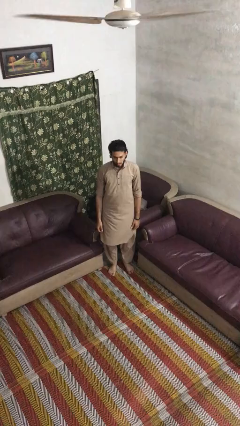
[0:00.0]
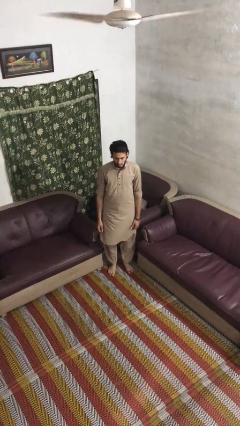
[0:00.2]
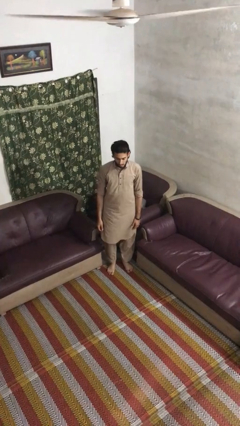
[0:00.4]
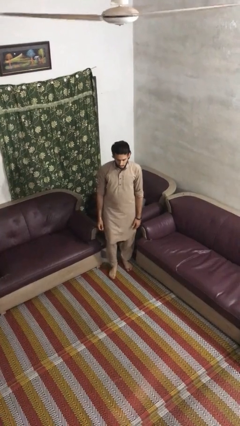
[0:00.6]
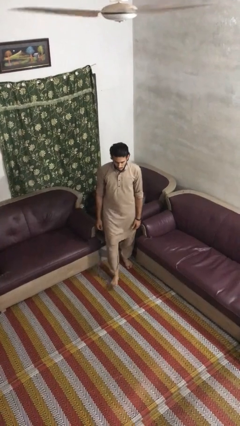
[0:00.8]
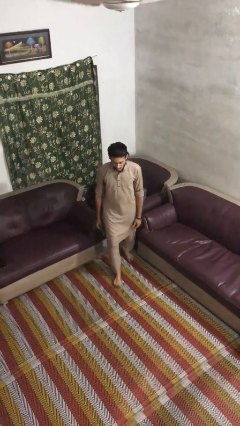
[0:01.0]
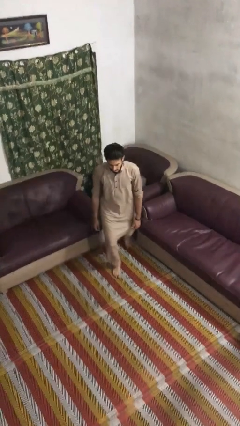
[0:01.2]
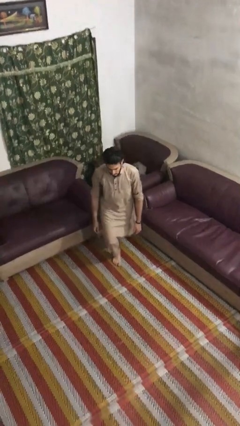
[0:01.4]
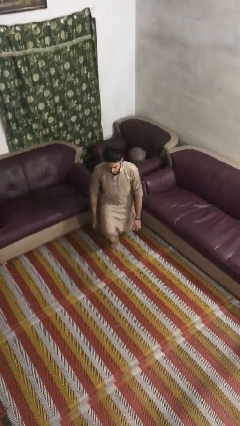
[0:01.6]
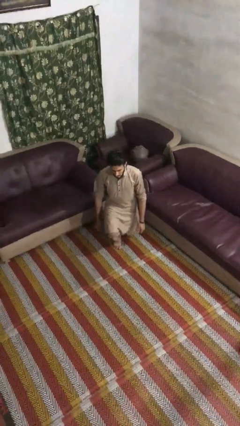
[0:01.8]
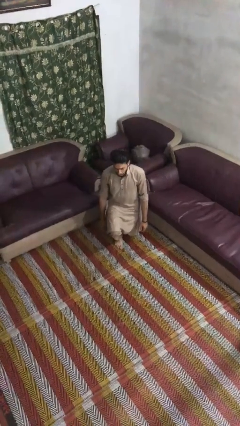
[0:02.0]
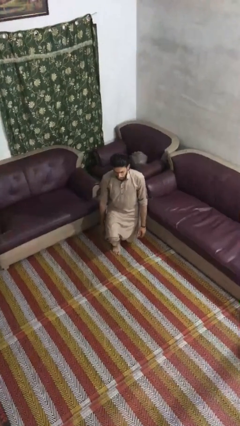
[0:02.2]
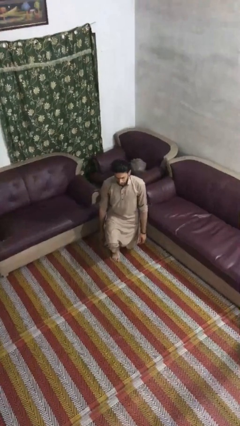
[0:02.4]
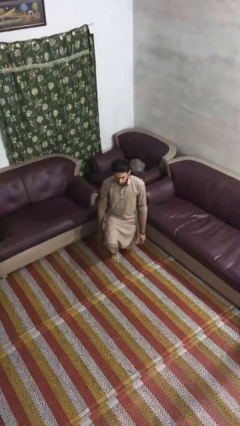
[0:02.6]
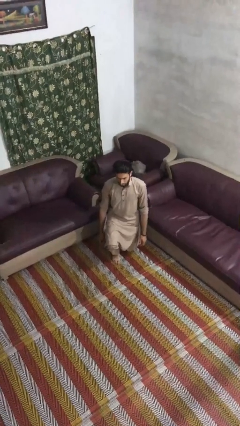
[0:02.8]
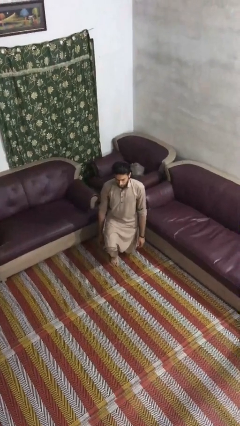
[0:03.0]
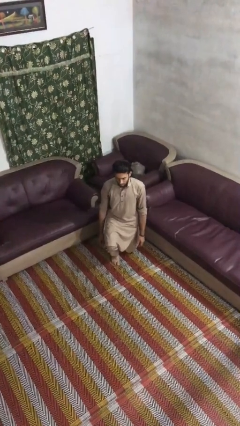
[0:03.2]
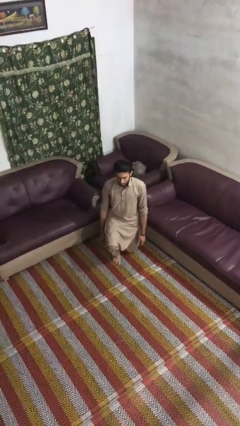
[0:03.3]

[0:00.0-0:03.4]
person kneels

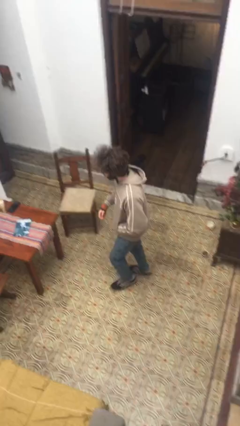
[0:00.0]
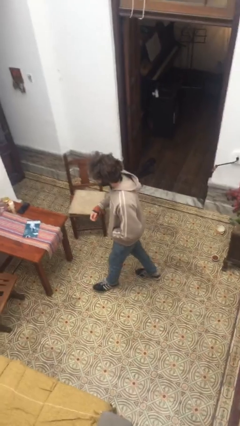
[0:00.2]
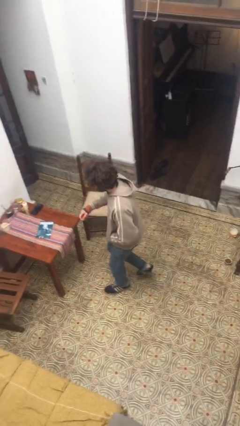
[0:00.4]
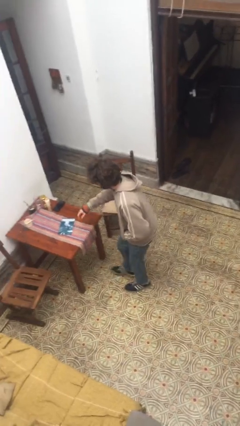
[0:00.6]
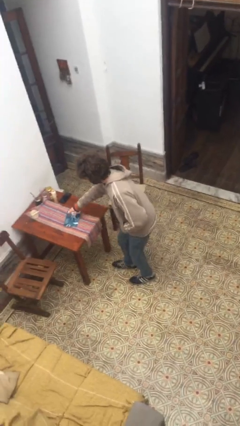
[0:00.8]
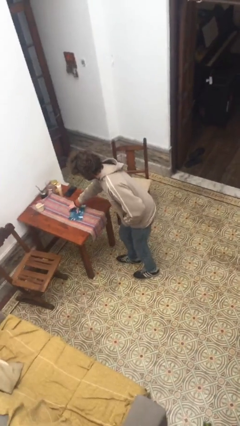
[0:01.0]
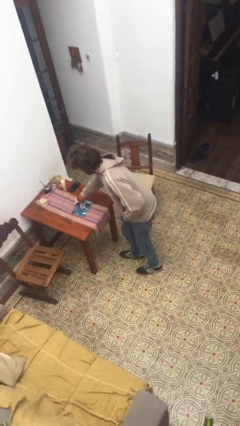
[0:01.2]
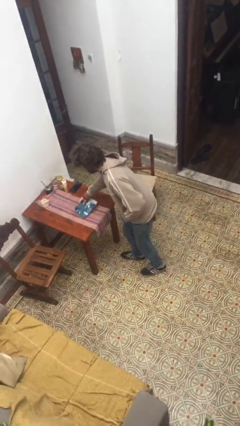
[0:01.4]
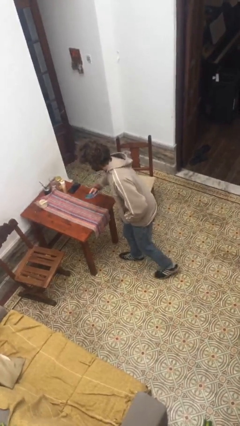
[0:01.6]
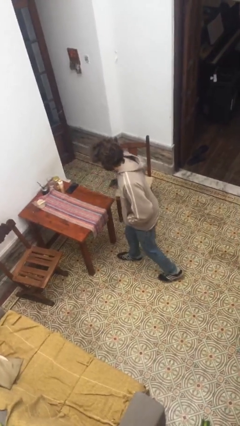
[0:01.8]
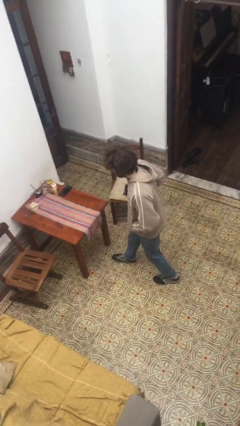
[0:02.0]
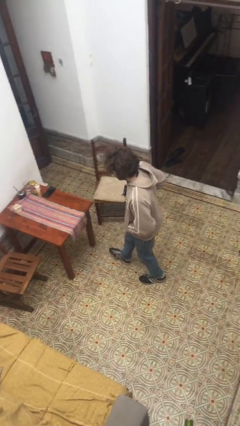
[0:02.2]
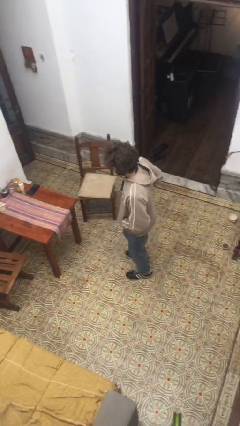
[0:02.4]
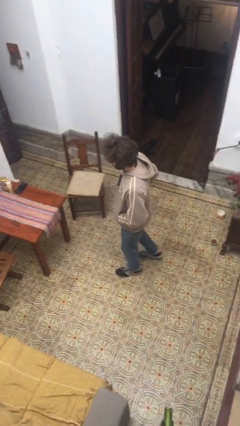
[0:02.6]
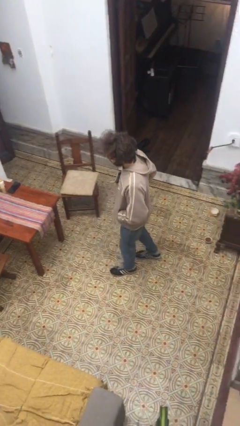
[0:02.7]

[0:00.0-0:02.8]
person picks up object from bed

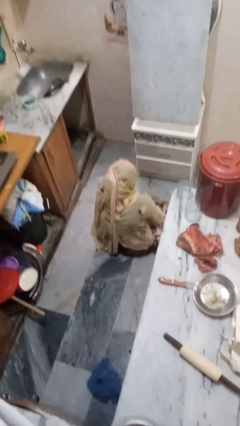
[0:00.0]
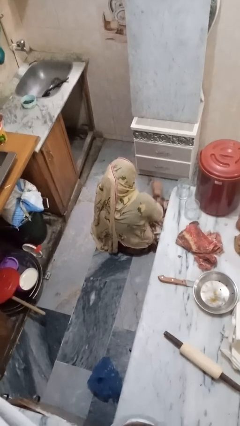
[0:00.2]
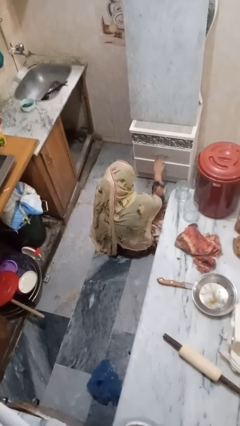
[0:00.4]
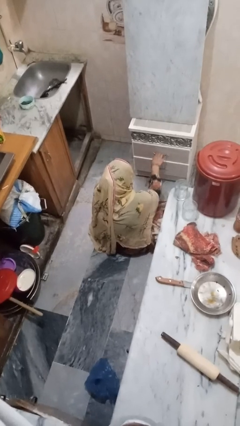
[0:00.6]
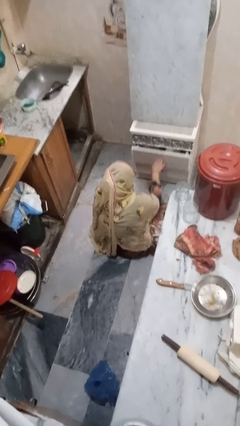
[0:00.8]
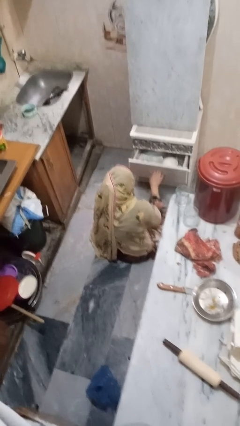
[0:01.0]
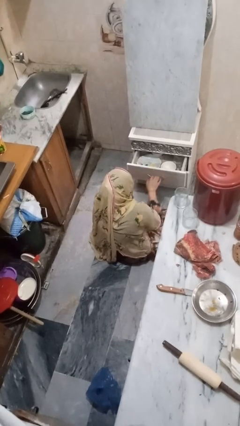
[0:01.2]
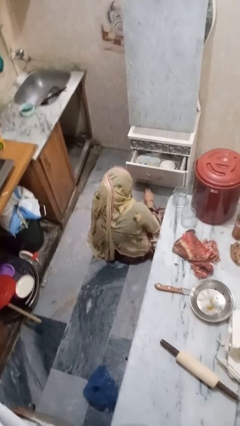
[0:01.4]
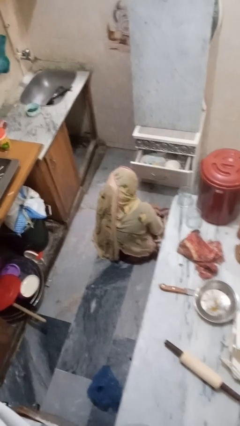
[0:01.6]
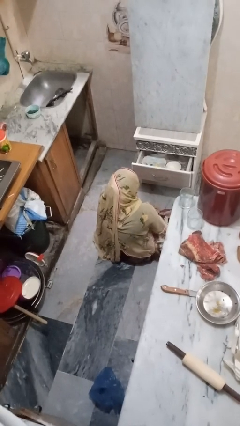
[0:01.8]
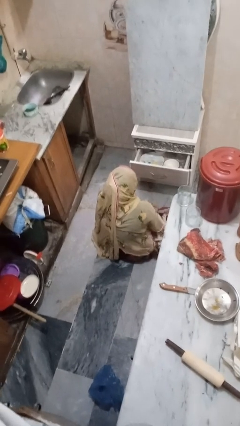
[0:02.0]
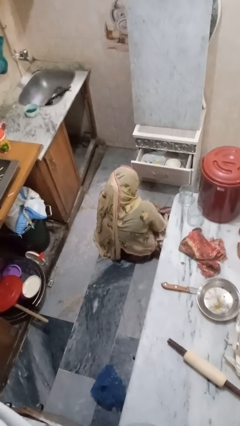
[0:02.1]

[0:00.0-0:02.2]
person opens kitchen drawer

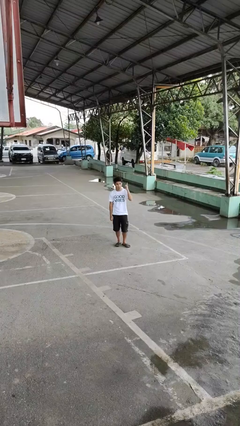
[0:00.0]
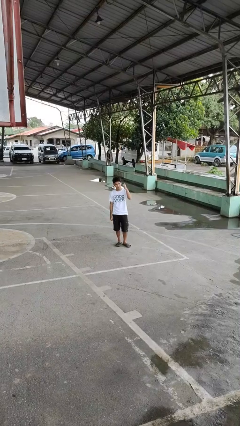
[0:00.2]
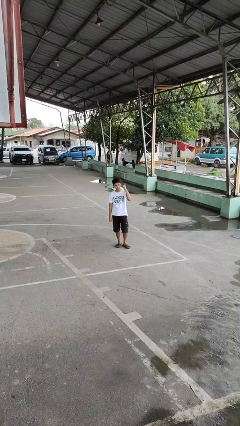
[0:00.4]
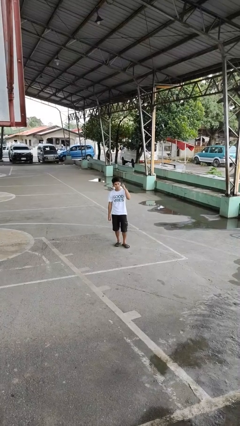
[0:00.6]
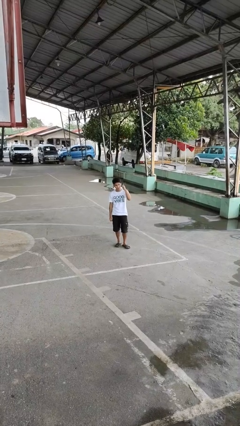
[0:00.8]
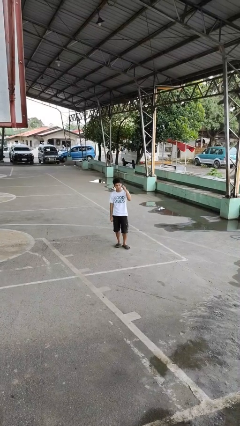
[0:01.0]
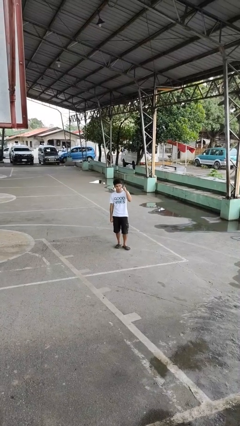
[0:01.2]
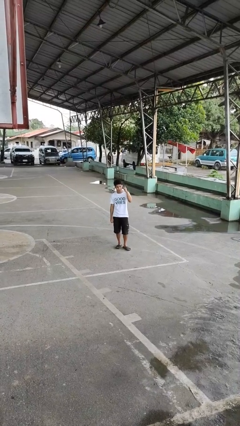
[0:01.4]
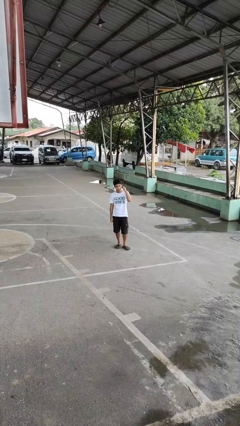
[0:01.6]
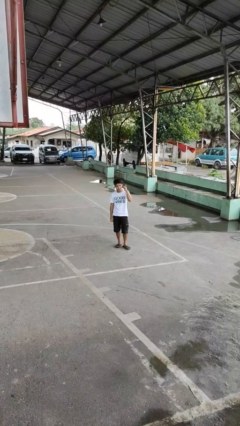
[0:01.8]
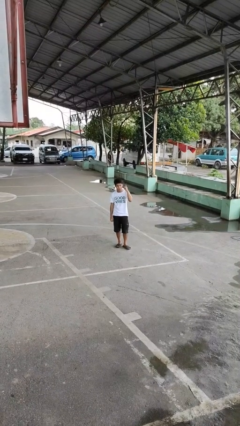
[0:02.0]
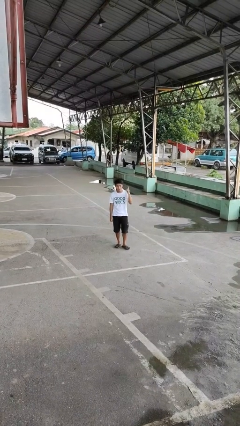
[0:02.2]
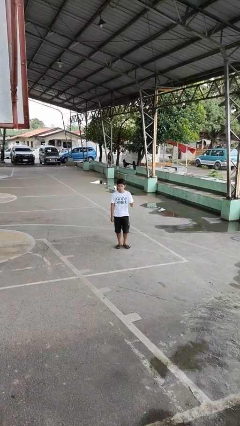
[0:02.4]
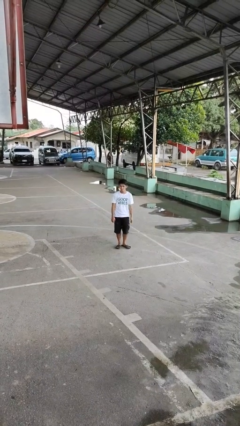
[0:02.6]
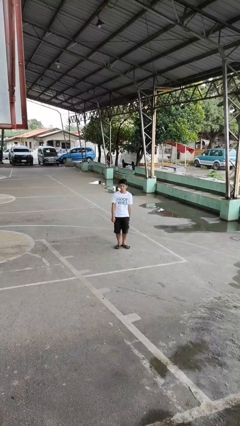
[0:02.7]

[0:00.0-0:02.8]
person gestures listen closely

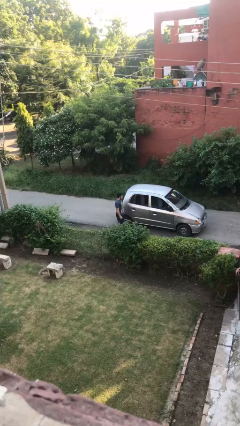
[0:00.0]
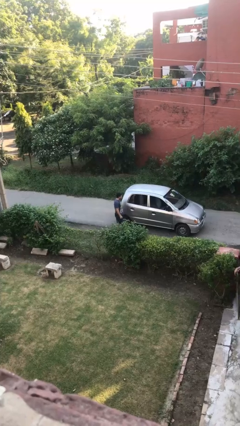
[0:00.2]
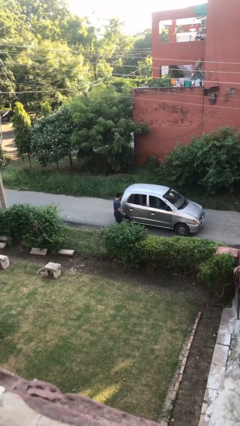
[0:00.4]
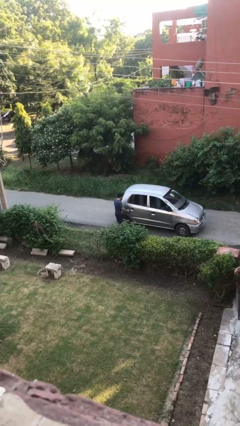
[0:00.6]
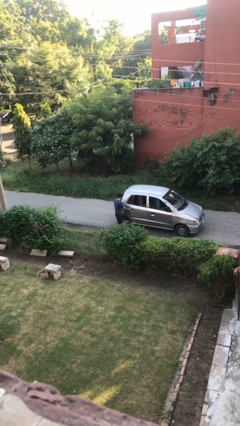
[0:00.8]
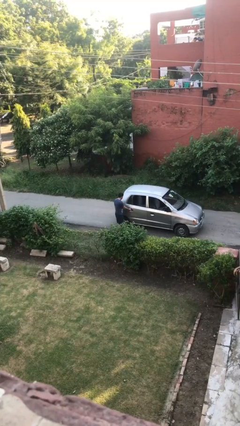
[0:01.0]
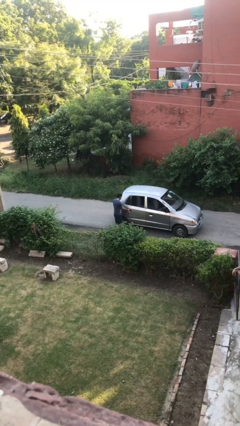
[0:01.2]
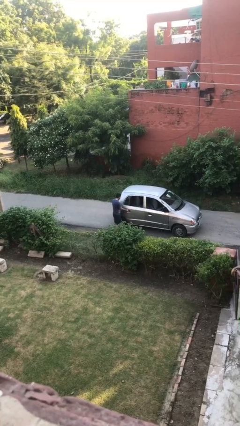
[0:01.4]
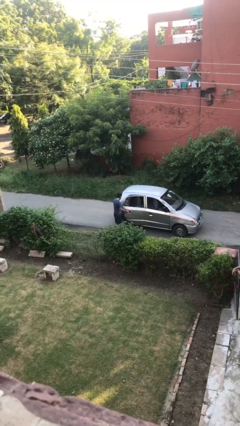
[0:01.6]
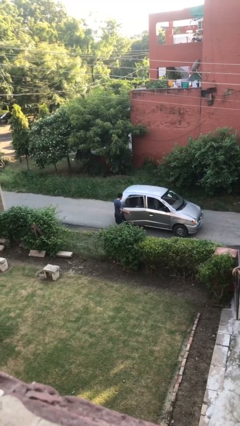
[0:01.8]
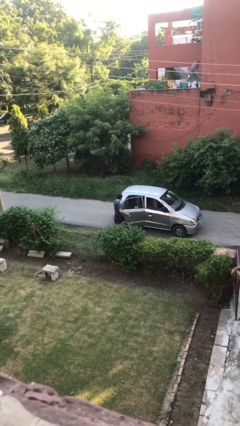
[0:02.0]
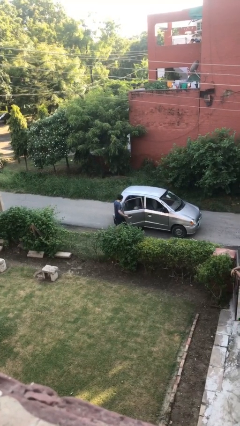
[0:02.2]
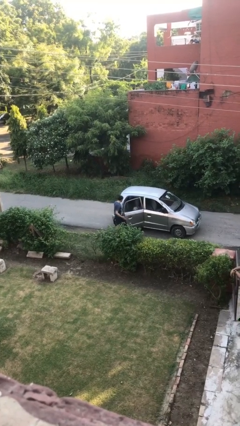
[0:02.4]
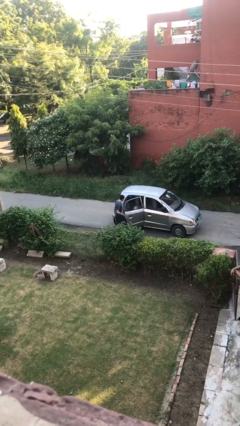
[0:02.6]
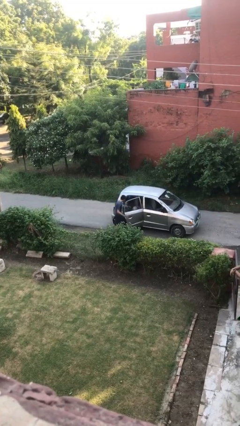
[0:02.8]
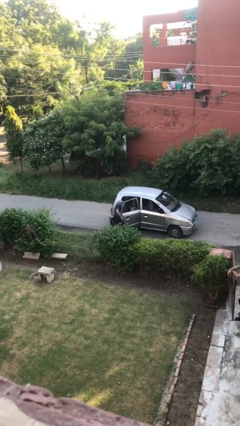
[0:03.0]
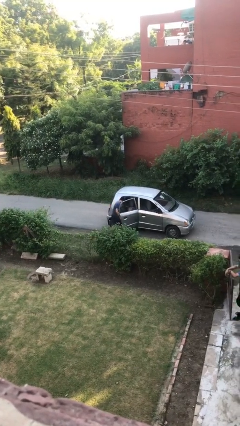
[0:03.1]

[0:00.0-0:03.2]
person opens car door

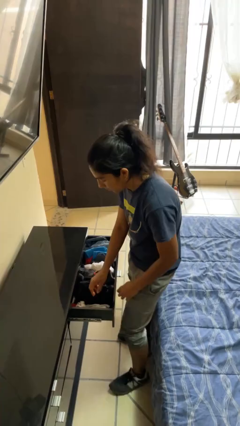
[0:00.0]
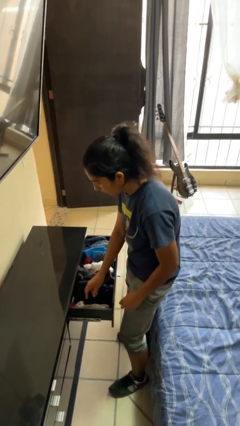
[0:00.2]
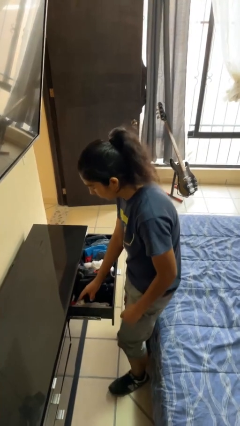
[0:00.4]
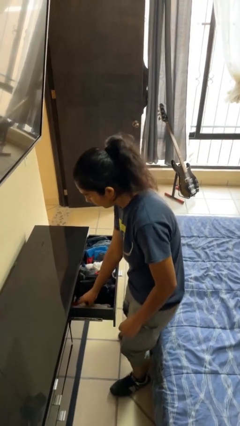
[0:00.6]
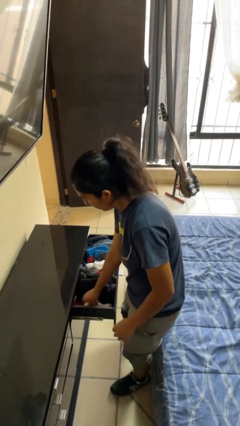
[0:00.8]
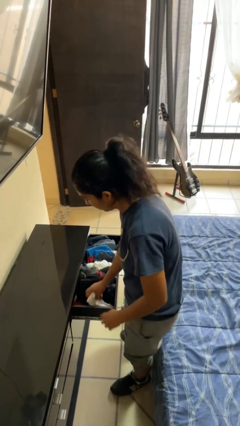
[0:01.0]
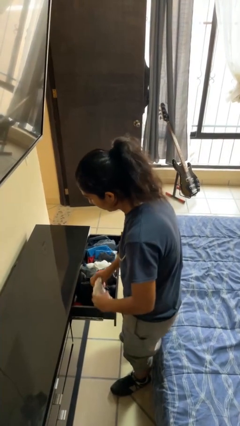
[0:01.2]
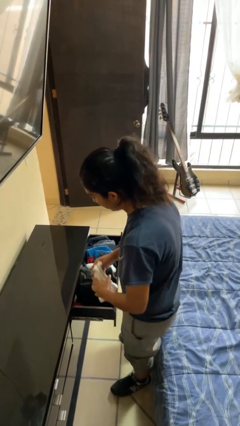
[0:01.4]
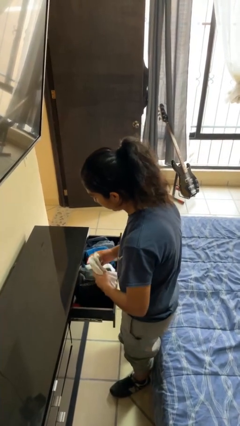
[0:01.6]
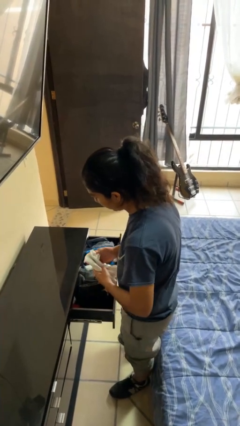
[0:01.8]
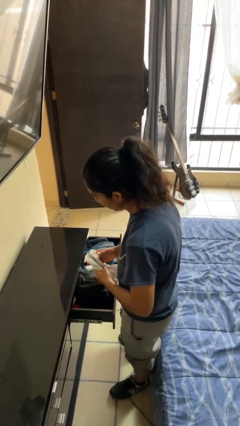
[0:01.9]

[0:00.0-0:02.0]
person takes clothes from dresser

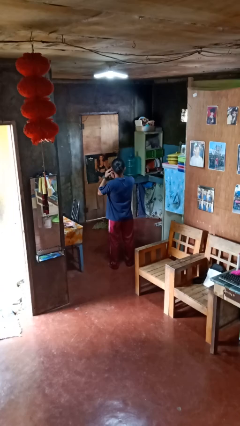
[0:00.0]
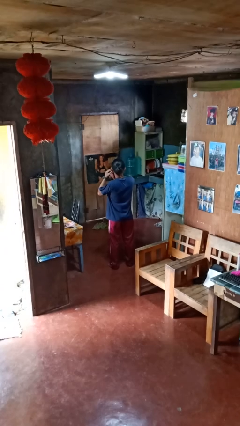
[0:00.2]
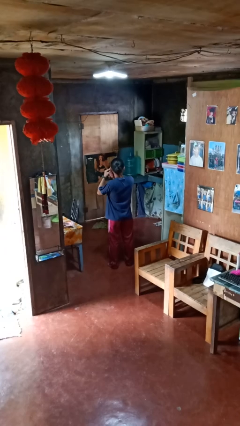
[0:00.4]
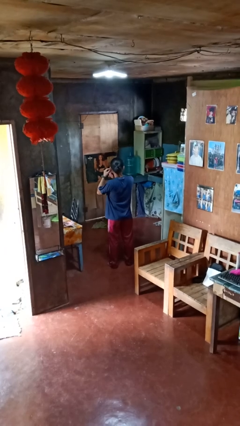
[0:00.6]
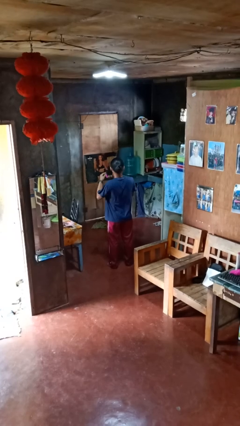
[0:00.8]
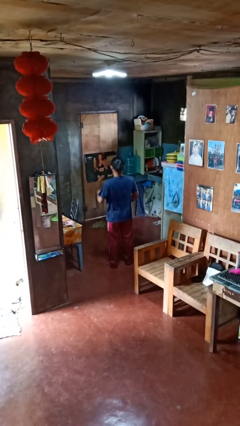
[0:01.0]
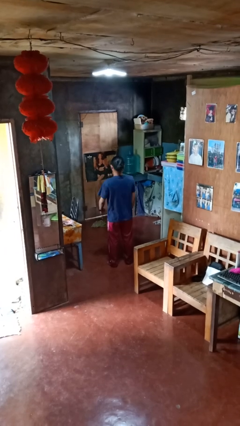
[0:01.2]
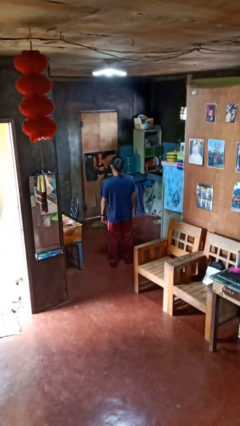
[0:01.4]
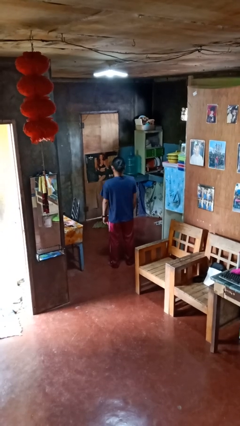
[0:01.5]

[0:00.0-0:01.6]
person takes off earrings
